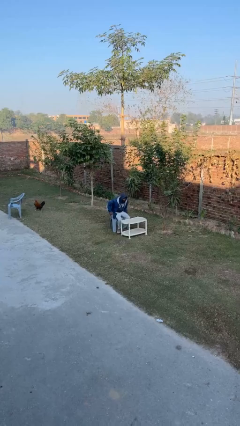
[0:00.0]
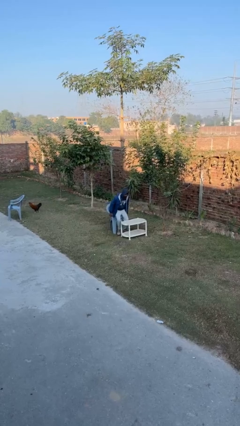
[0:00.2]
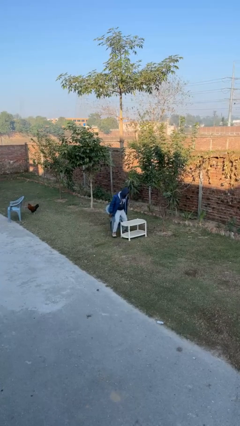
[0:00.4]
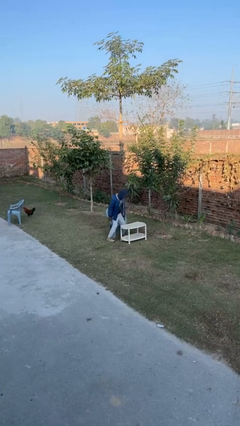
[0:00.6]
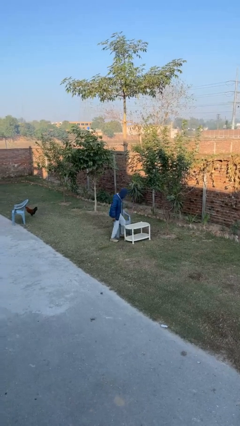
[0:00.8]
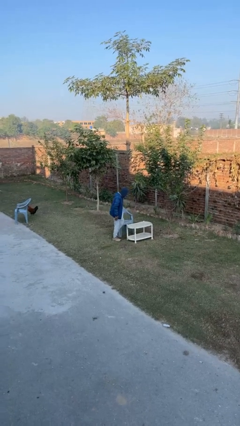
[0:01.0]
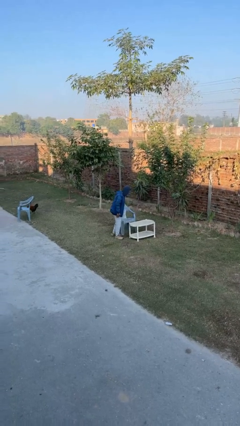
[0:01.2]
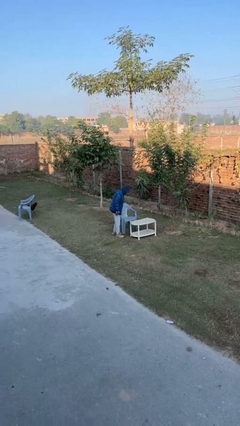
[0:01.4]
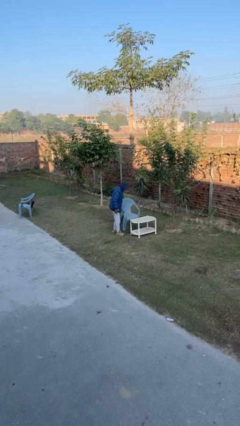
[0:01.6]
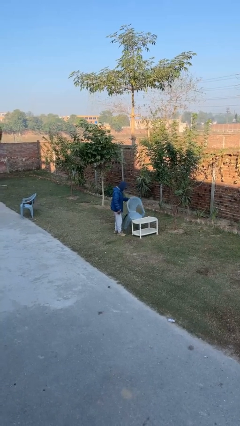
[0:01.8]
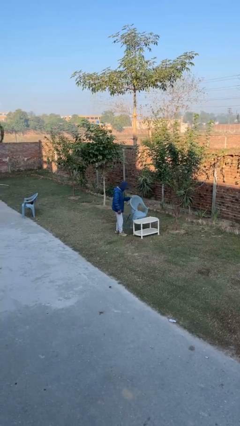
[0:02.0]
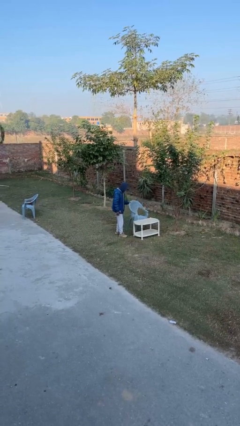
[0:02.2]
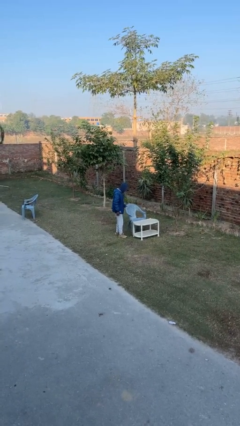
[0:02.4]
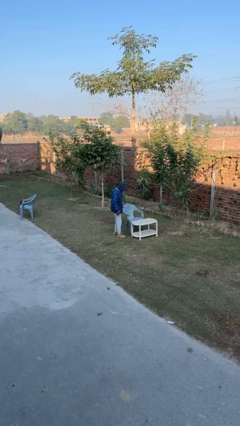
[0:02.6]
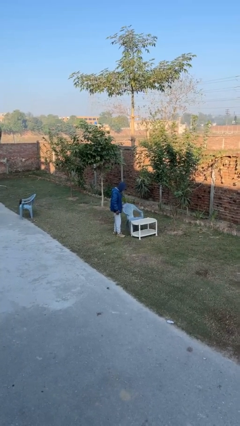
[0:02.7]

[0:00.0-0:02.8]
person stands up

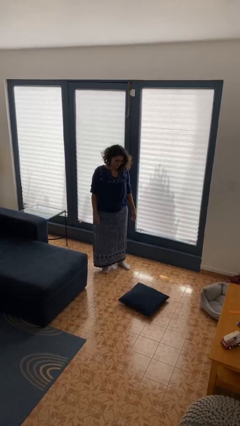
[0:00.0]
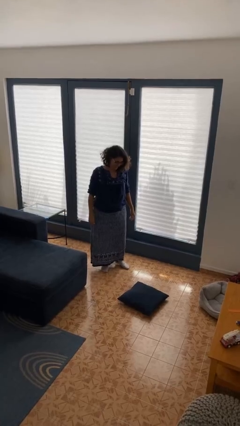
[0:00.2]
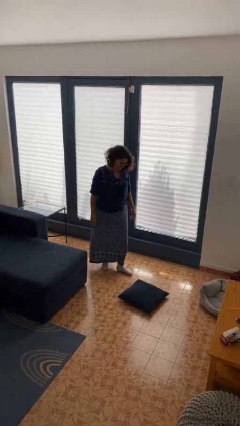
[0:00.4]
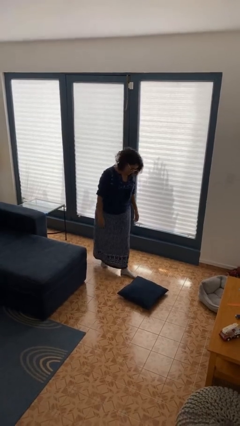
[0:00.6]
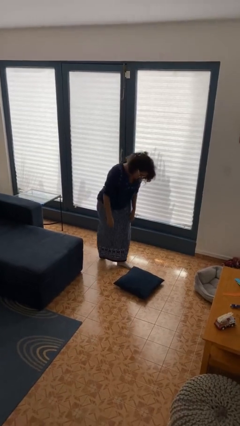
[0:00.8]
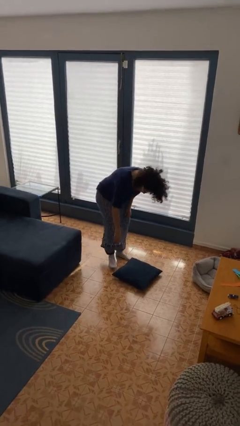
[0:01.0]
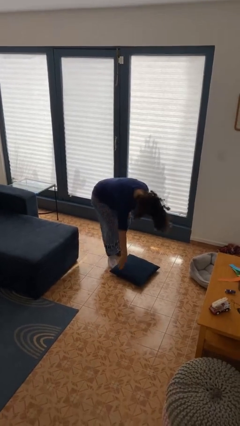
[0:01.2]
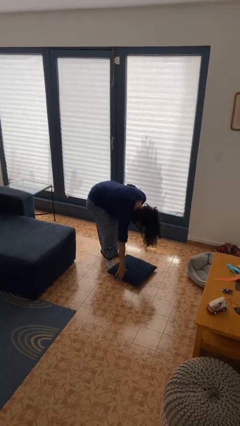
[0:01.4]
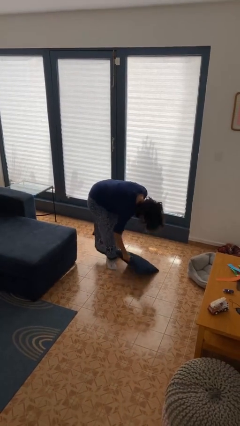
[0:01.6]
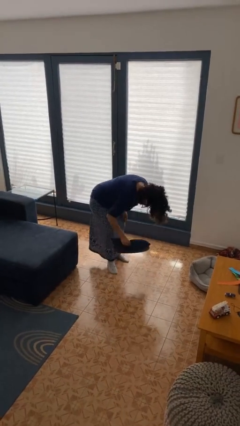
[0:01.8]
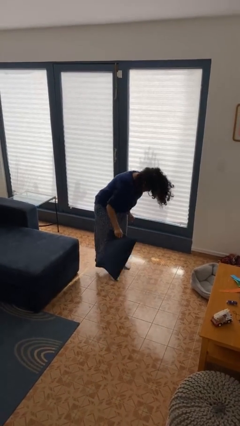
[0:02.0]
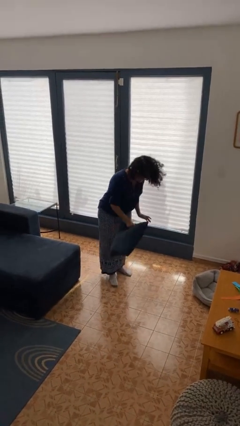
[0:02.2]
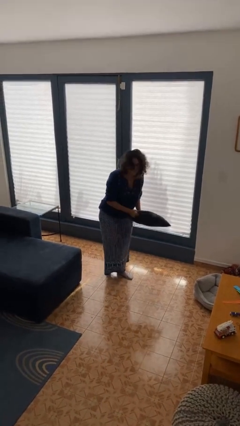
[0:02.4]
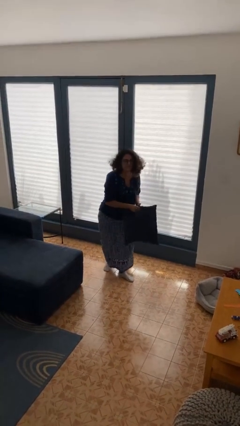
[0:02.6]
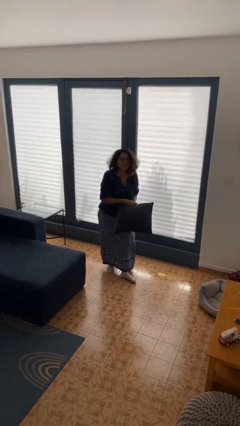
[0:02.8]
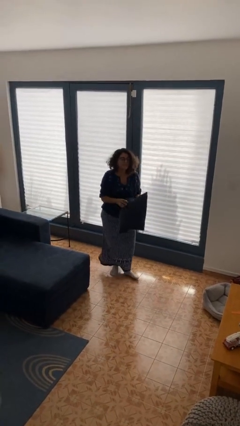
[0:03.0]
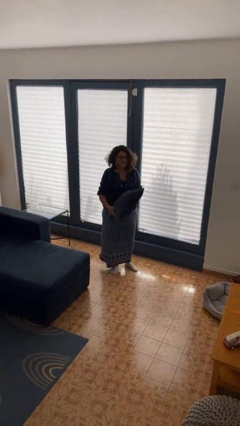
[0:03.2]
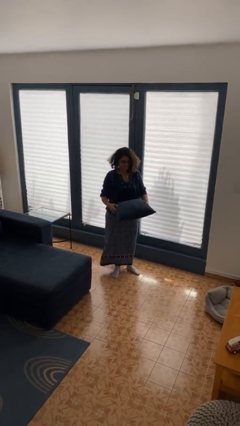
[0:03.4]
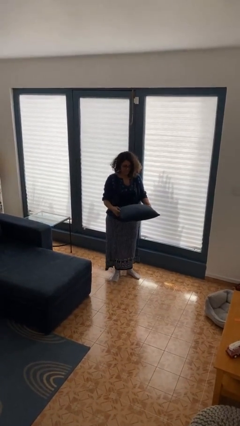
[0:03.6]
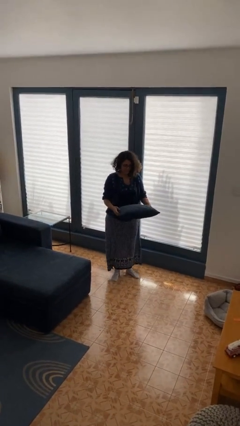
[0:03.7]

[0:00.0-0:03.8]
person picks up object from floor

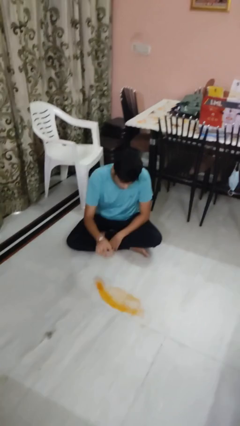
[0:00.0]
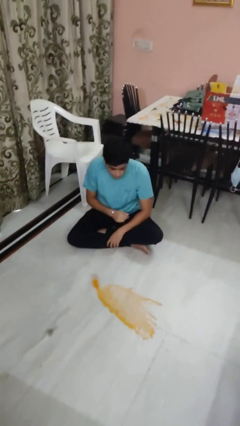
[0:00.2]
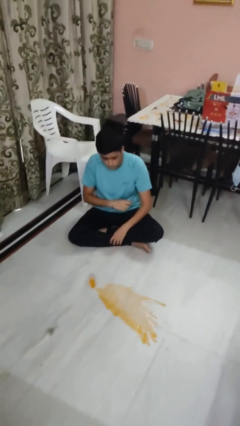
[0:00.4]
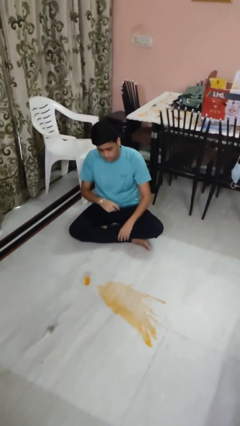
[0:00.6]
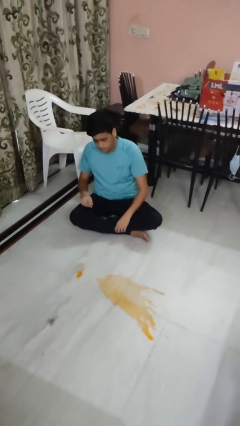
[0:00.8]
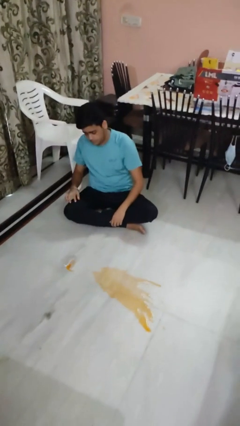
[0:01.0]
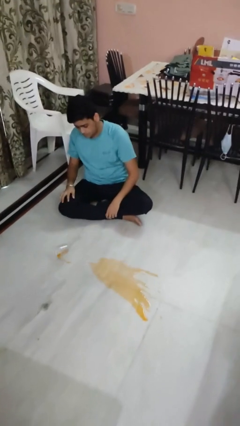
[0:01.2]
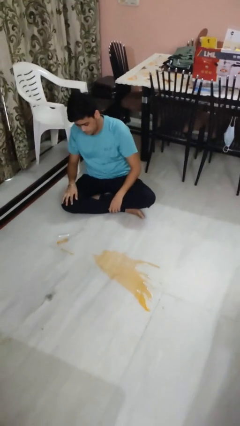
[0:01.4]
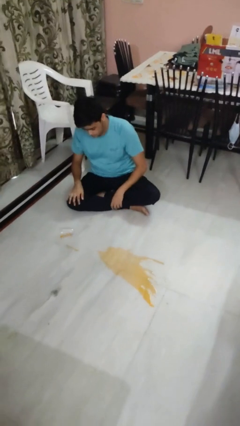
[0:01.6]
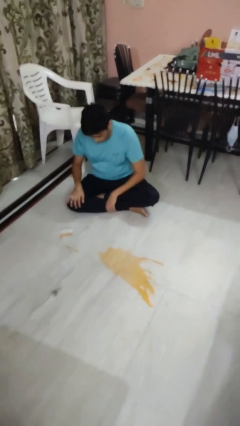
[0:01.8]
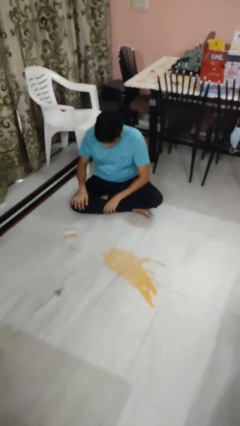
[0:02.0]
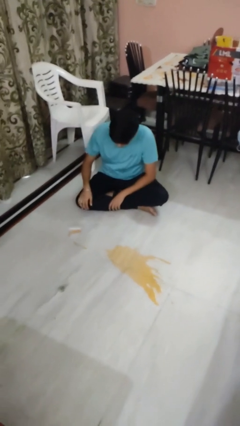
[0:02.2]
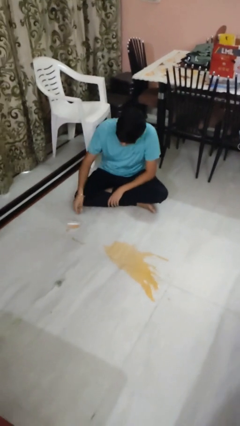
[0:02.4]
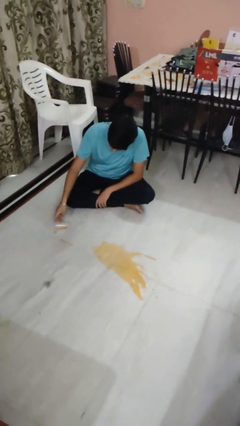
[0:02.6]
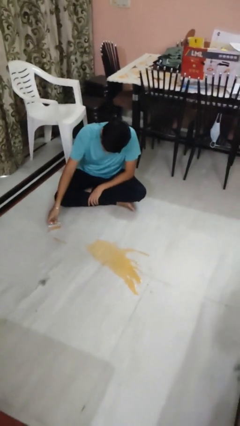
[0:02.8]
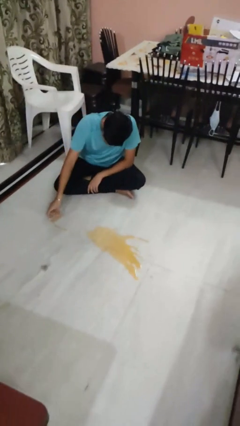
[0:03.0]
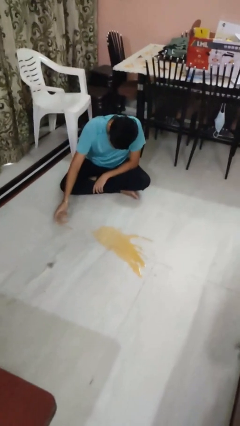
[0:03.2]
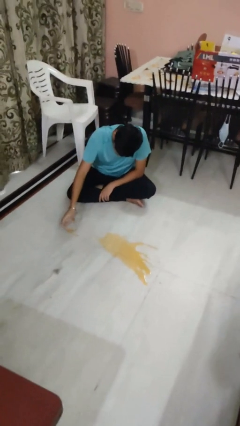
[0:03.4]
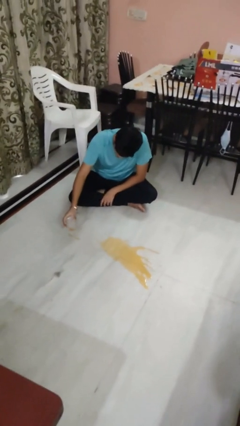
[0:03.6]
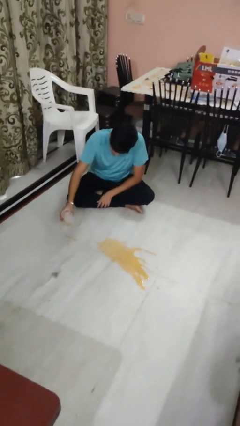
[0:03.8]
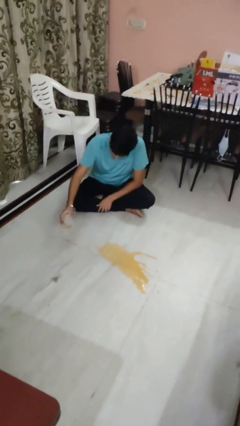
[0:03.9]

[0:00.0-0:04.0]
person spills on floor

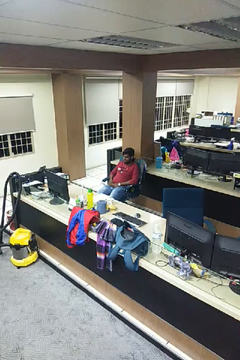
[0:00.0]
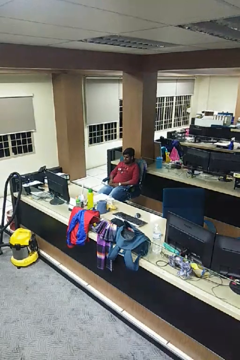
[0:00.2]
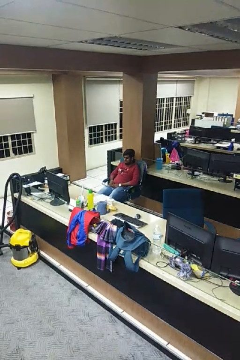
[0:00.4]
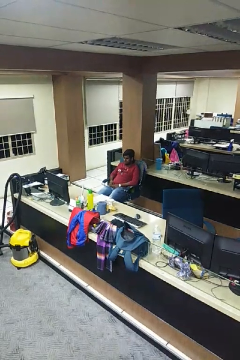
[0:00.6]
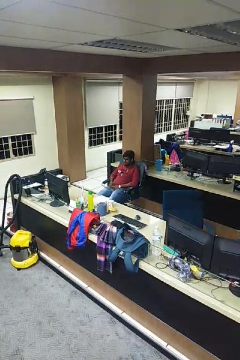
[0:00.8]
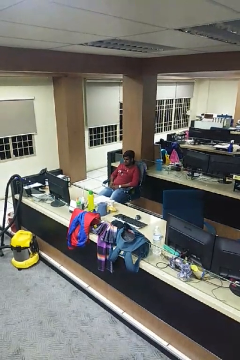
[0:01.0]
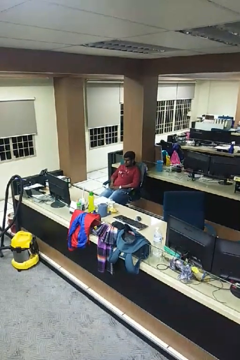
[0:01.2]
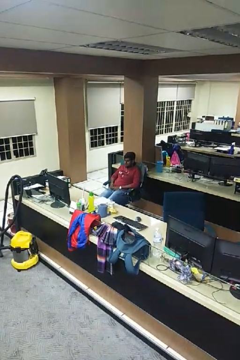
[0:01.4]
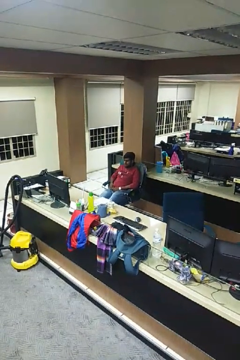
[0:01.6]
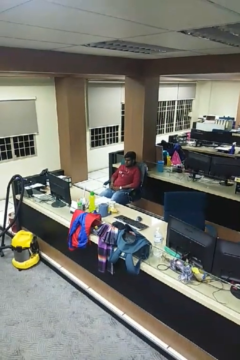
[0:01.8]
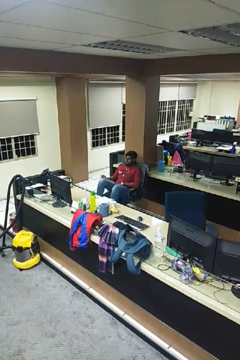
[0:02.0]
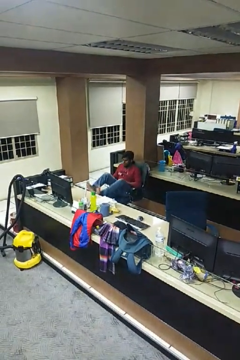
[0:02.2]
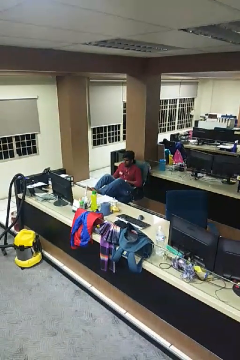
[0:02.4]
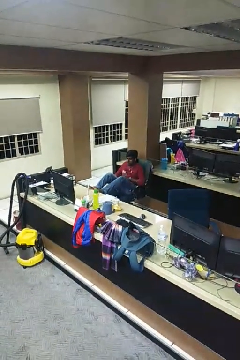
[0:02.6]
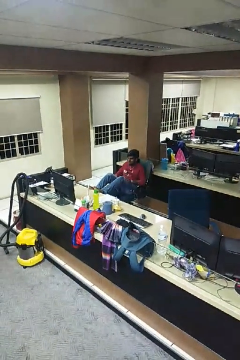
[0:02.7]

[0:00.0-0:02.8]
person puts feet up

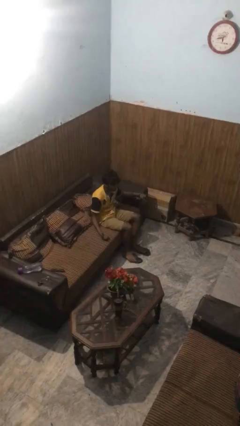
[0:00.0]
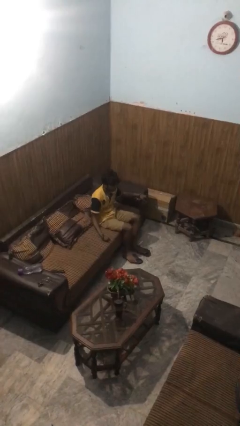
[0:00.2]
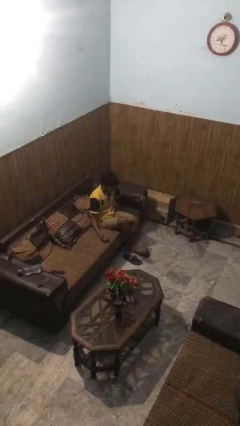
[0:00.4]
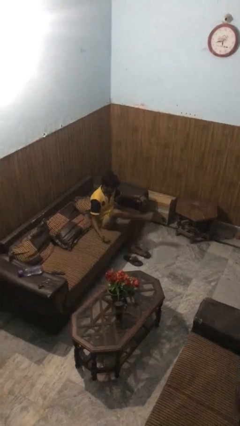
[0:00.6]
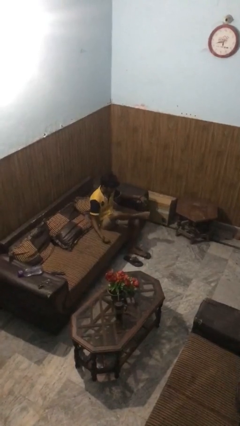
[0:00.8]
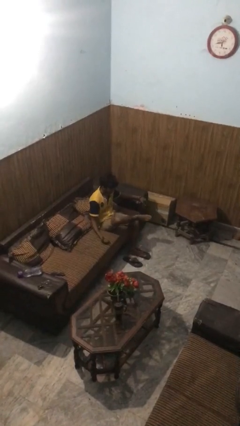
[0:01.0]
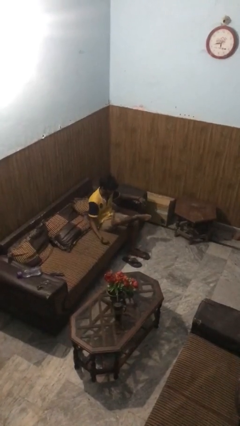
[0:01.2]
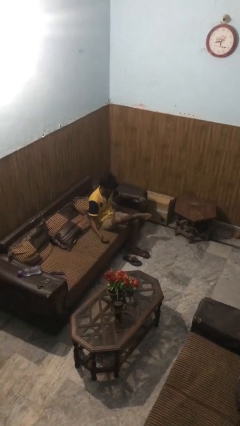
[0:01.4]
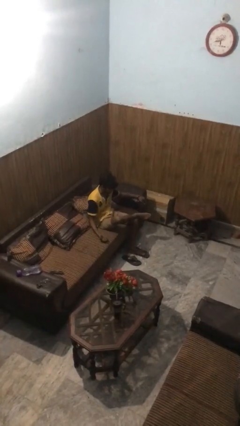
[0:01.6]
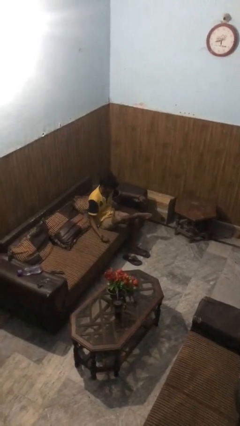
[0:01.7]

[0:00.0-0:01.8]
person crosses legs

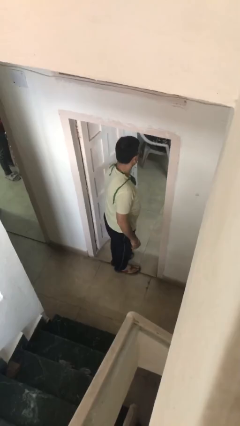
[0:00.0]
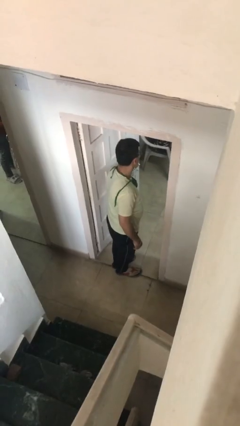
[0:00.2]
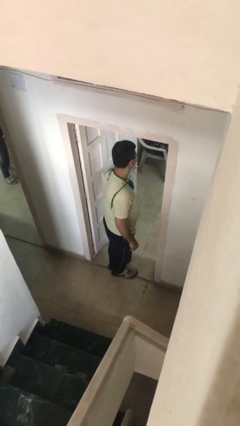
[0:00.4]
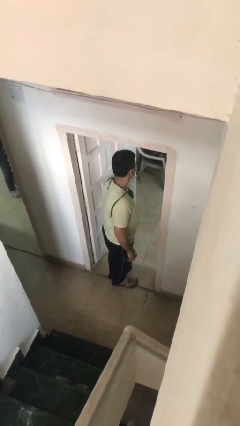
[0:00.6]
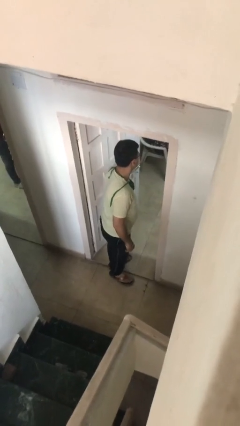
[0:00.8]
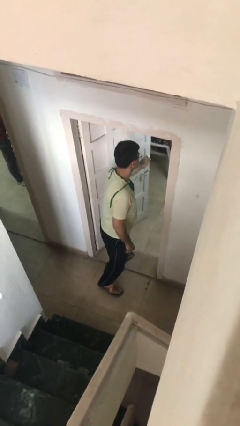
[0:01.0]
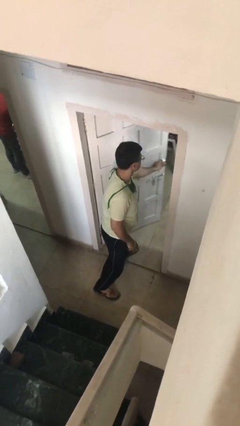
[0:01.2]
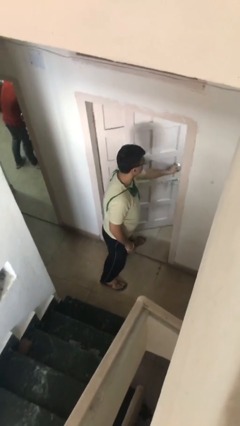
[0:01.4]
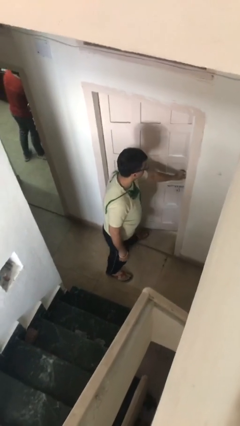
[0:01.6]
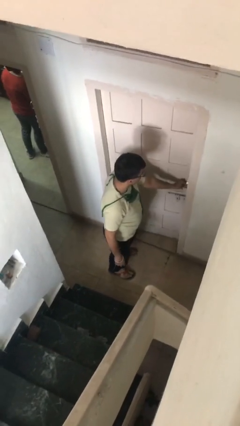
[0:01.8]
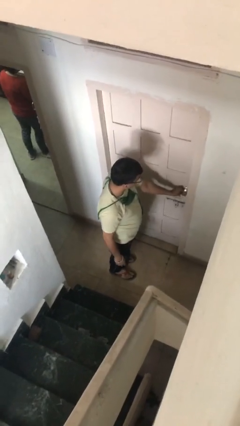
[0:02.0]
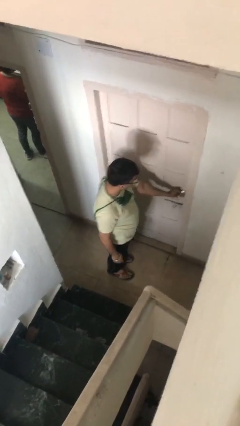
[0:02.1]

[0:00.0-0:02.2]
person closes facility door

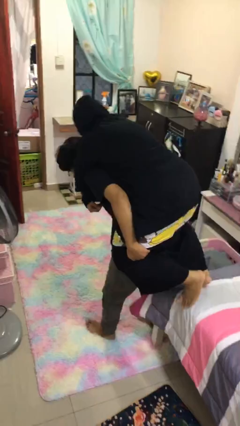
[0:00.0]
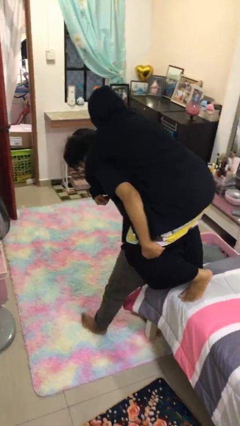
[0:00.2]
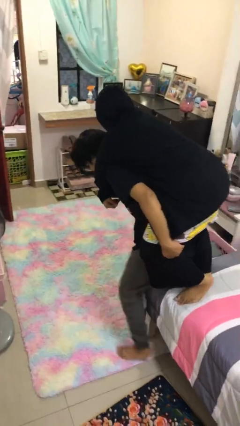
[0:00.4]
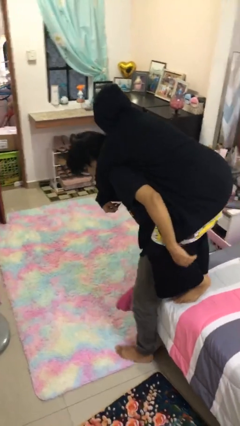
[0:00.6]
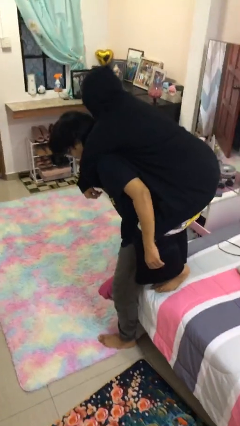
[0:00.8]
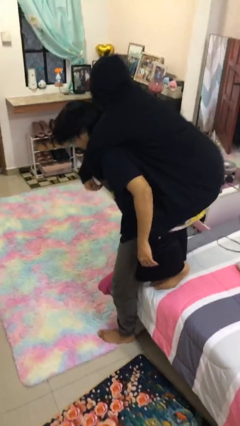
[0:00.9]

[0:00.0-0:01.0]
person puts down person
